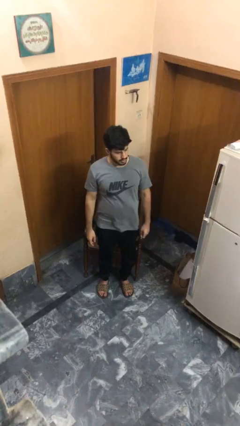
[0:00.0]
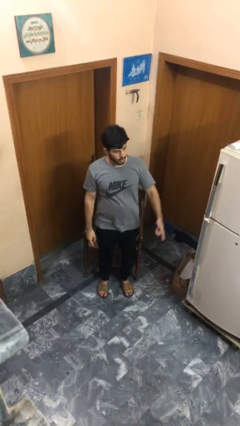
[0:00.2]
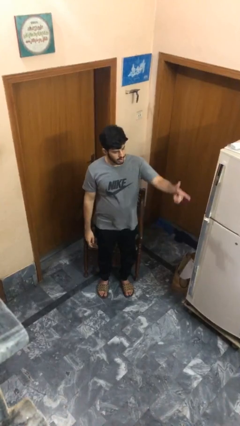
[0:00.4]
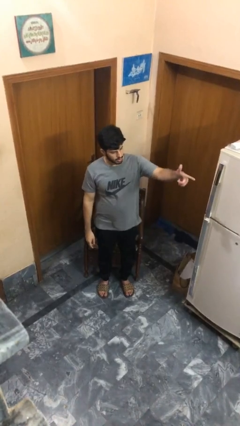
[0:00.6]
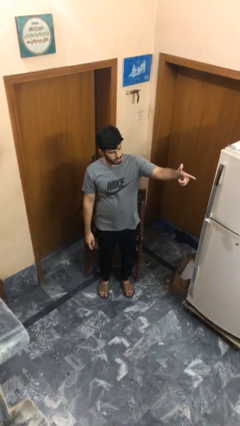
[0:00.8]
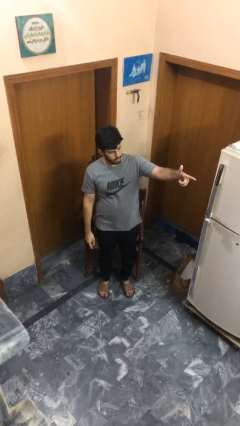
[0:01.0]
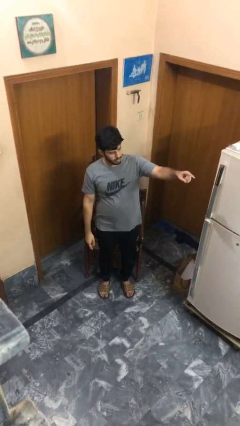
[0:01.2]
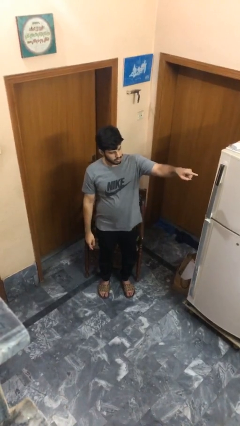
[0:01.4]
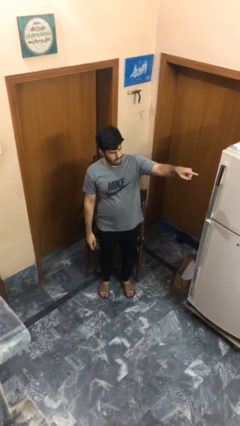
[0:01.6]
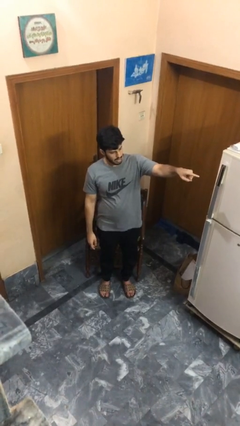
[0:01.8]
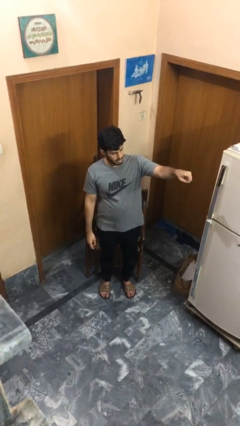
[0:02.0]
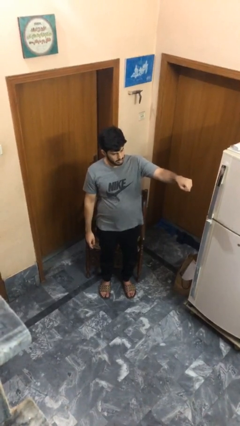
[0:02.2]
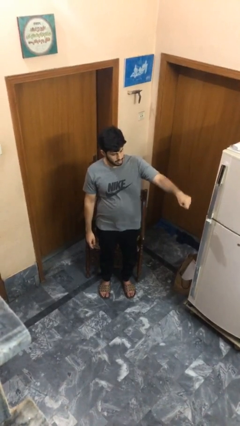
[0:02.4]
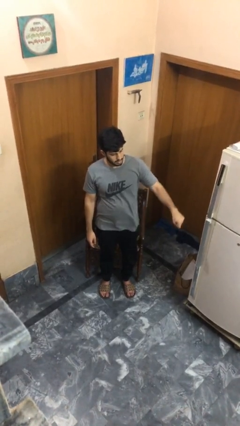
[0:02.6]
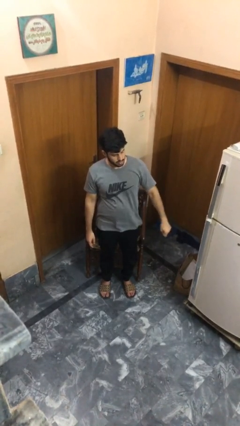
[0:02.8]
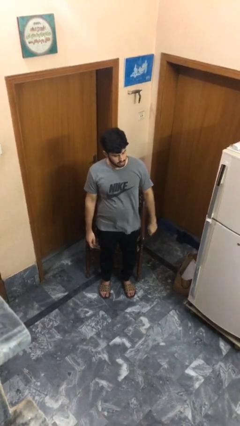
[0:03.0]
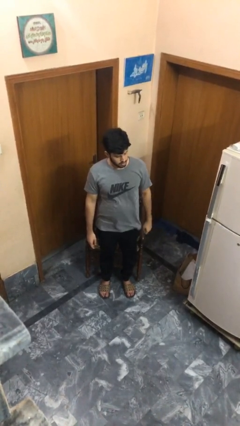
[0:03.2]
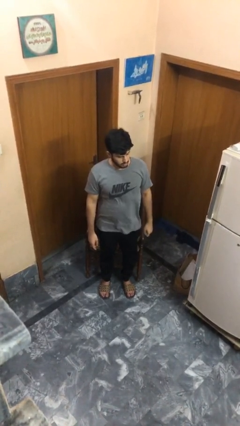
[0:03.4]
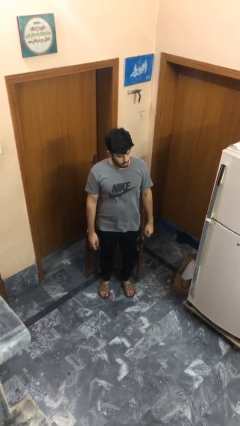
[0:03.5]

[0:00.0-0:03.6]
person points at person

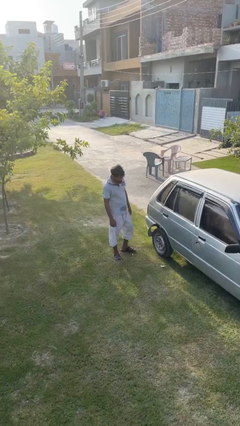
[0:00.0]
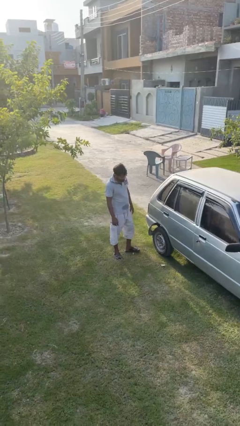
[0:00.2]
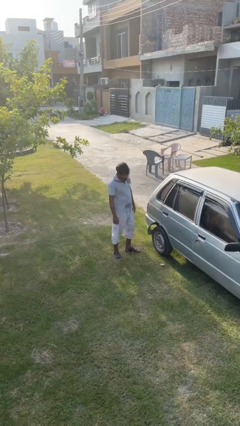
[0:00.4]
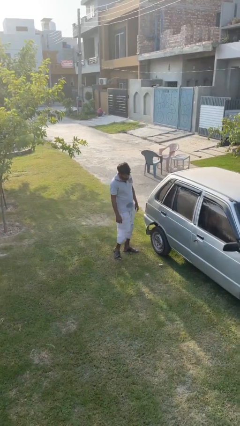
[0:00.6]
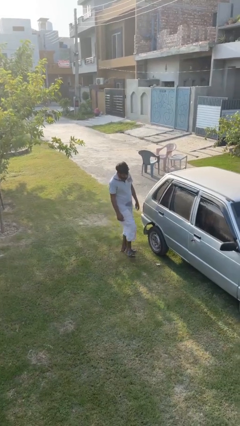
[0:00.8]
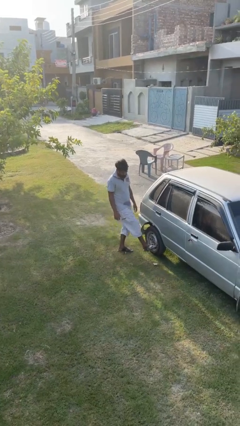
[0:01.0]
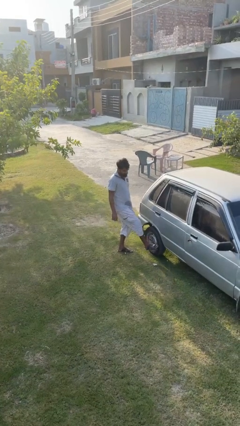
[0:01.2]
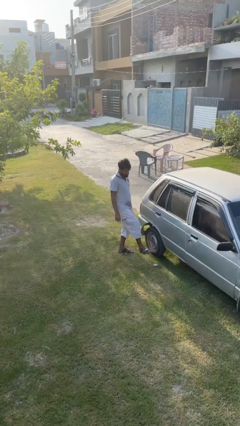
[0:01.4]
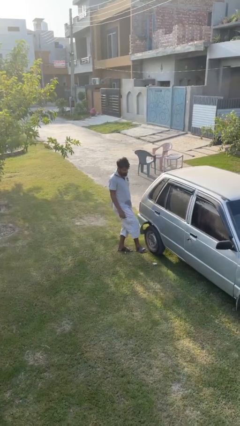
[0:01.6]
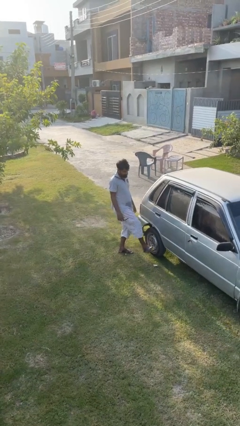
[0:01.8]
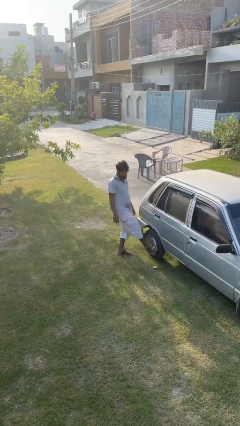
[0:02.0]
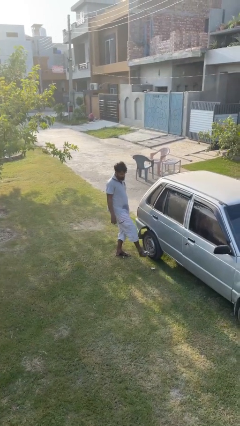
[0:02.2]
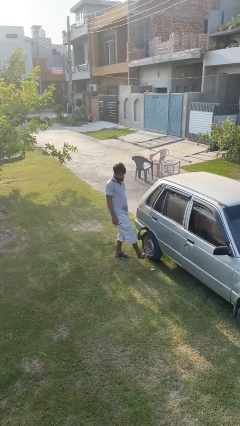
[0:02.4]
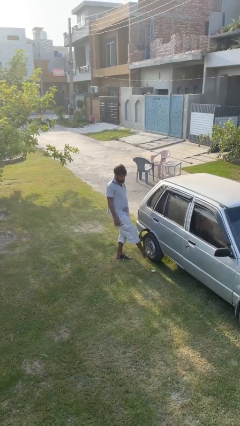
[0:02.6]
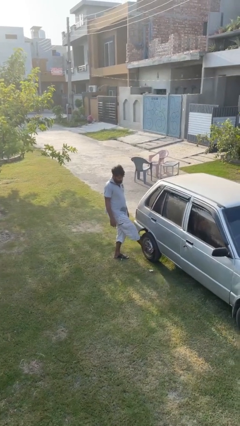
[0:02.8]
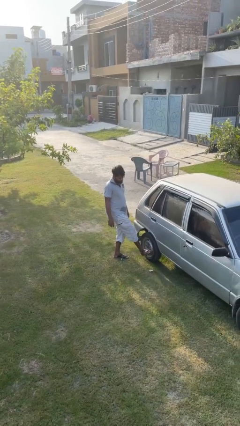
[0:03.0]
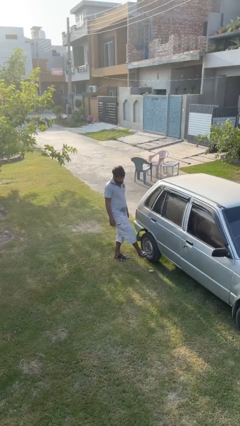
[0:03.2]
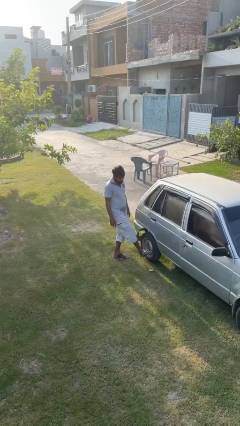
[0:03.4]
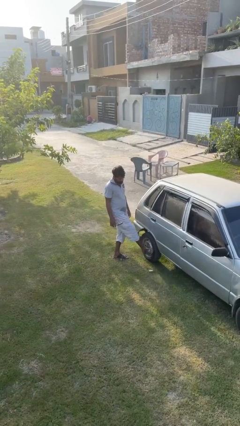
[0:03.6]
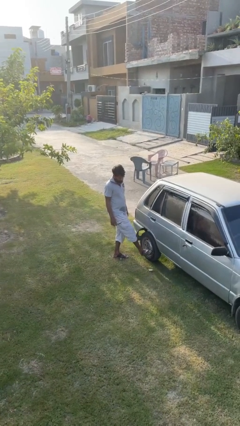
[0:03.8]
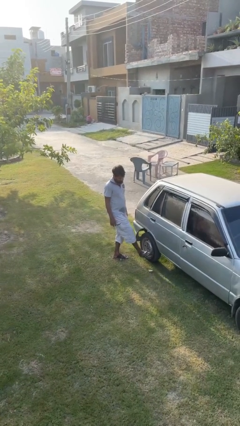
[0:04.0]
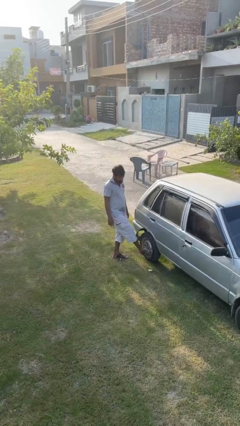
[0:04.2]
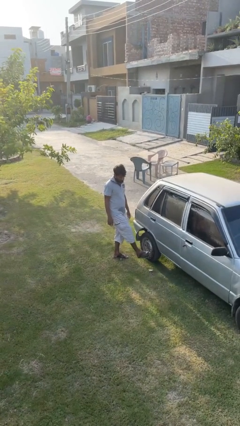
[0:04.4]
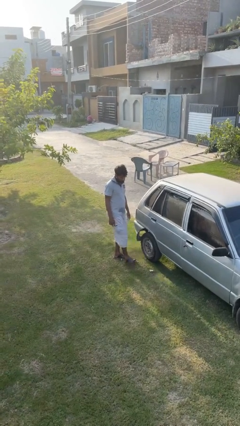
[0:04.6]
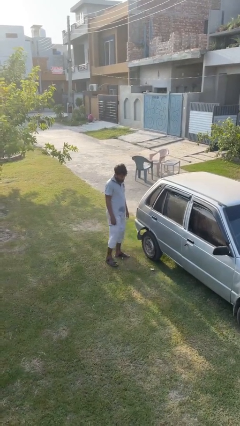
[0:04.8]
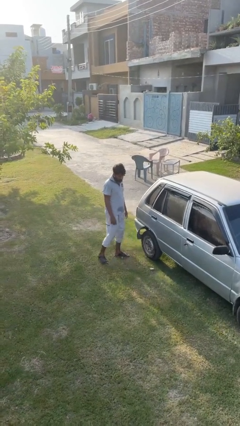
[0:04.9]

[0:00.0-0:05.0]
person kicks car tires

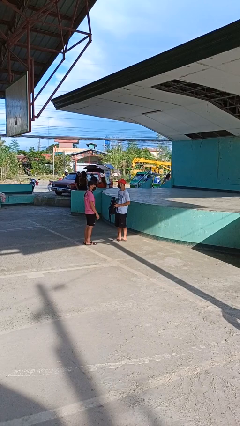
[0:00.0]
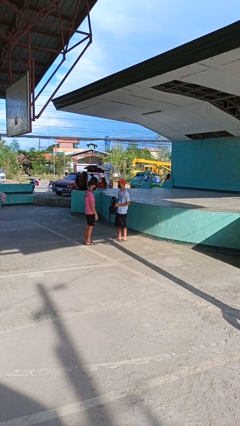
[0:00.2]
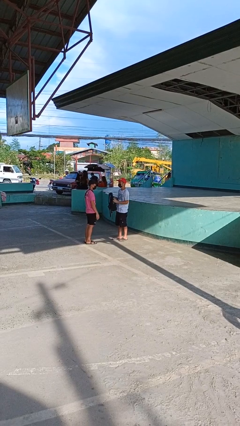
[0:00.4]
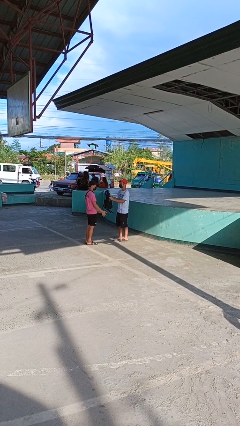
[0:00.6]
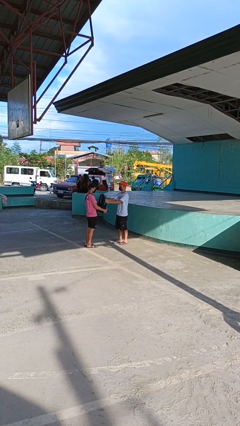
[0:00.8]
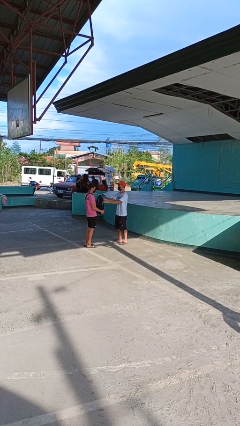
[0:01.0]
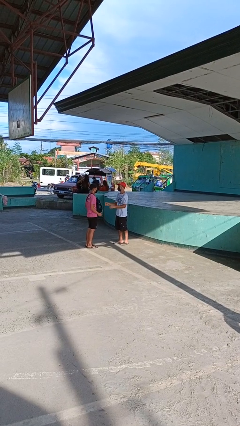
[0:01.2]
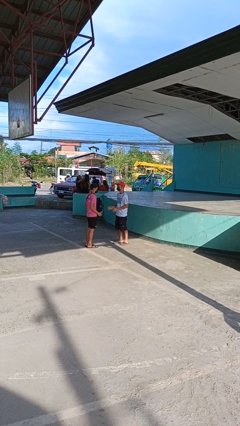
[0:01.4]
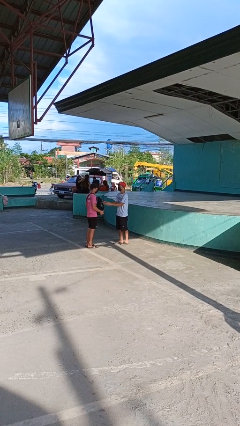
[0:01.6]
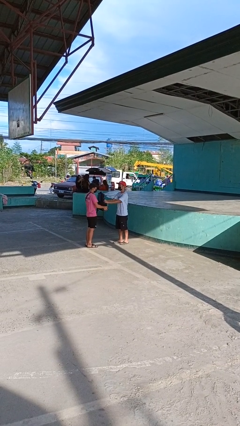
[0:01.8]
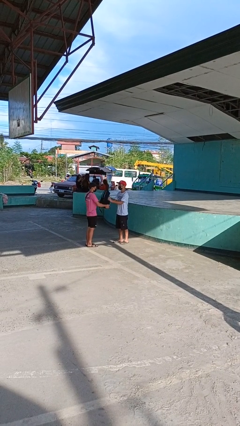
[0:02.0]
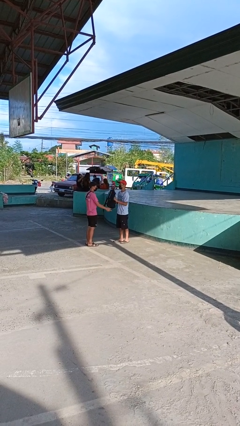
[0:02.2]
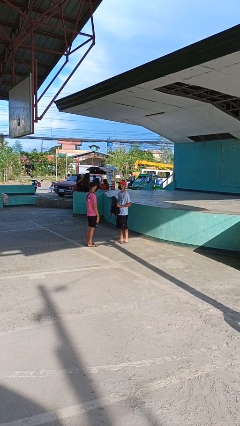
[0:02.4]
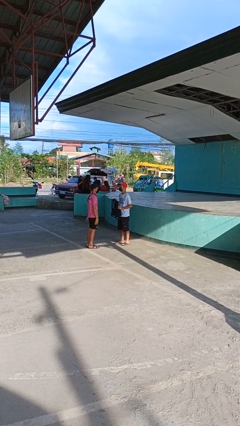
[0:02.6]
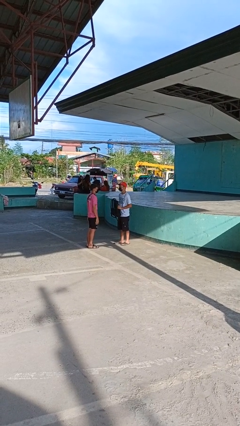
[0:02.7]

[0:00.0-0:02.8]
person transfers object to person

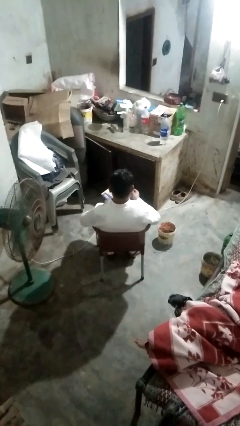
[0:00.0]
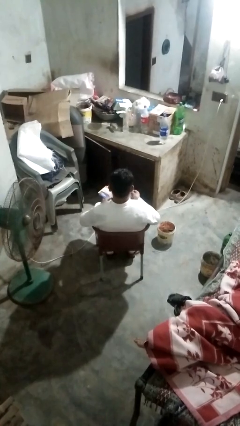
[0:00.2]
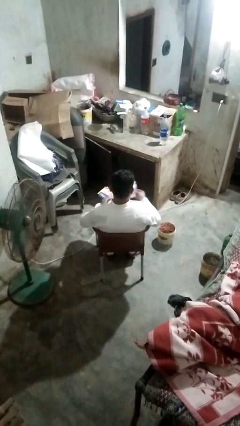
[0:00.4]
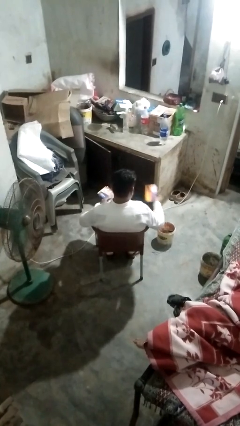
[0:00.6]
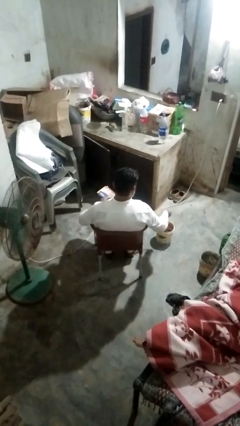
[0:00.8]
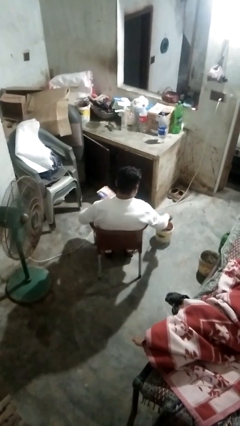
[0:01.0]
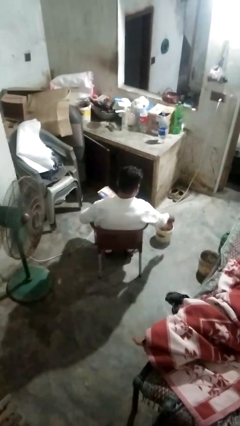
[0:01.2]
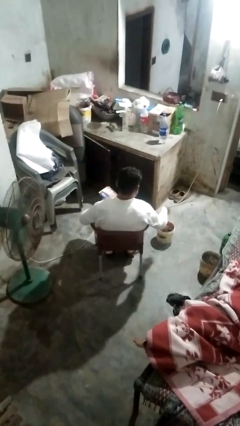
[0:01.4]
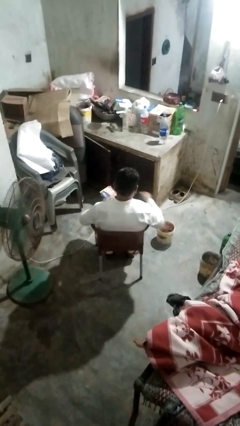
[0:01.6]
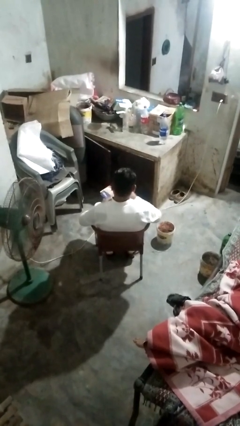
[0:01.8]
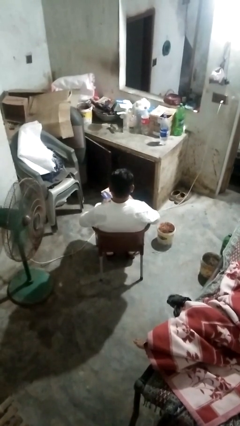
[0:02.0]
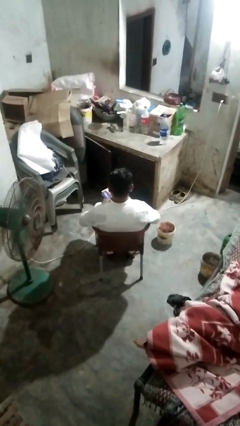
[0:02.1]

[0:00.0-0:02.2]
person discards trash

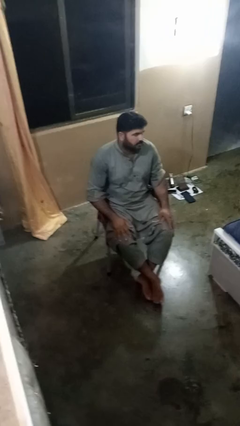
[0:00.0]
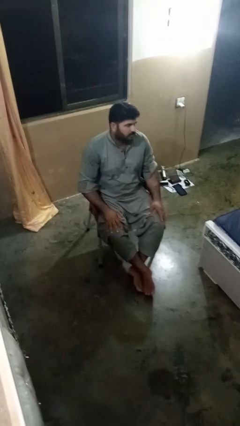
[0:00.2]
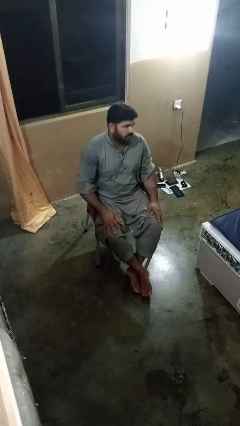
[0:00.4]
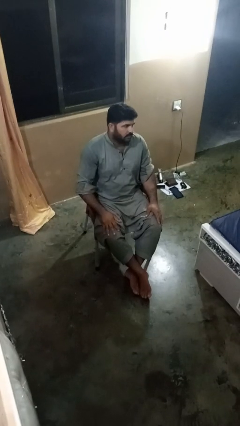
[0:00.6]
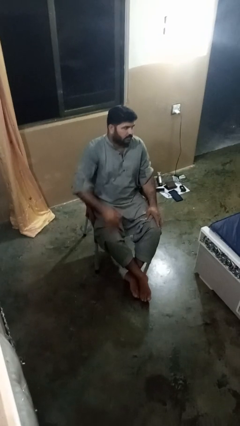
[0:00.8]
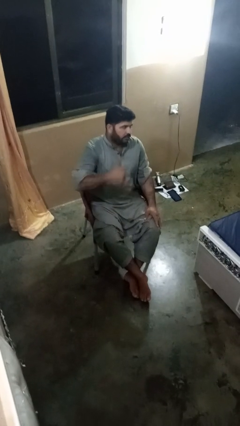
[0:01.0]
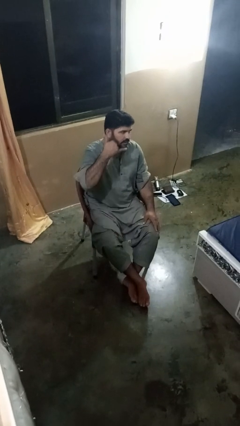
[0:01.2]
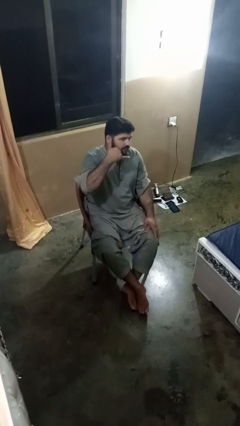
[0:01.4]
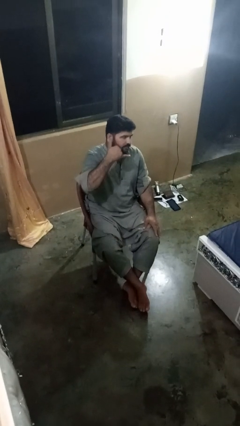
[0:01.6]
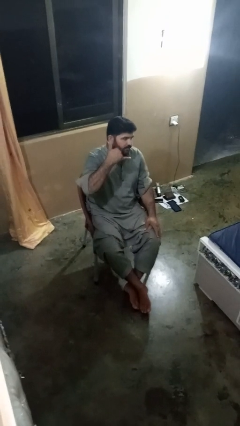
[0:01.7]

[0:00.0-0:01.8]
person gestures call me

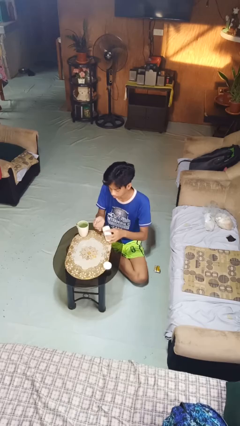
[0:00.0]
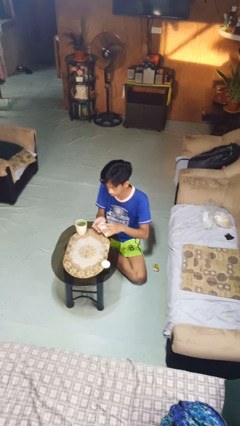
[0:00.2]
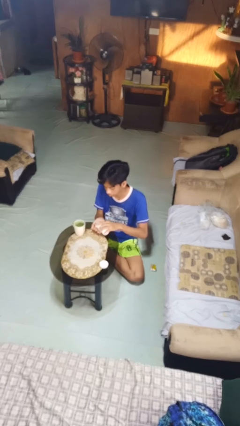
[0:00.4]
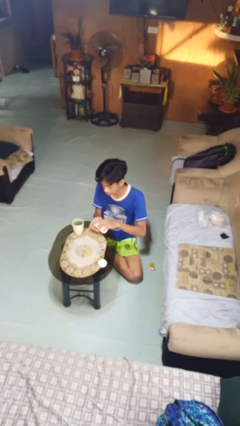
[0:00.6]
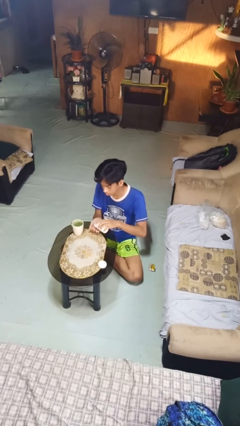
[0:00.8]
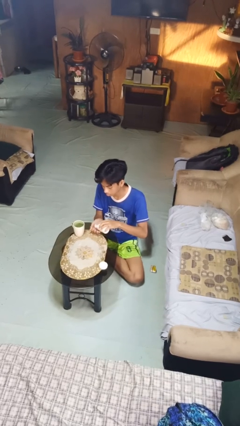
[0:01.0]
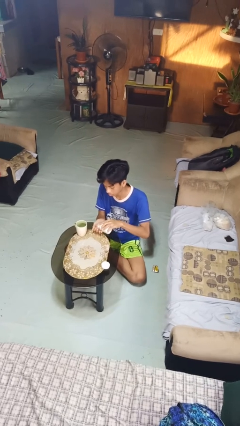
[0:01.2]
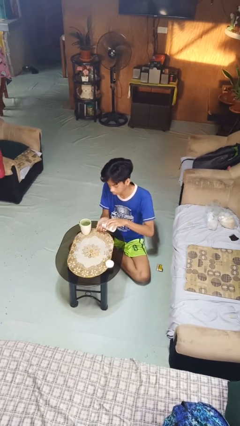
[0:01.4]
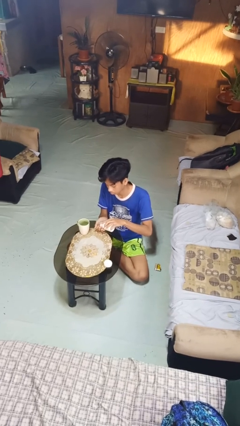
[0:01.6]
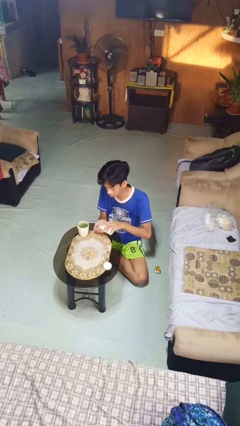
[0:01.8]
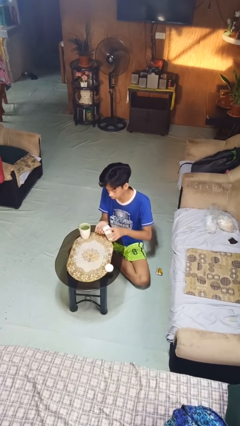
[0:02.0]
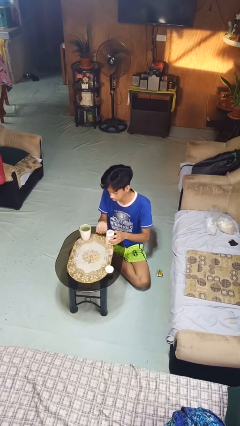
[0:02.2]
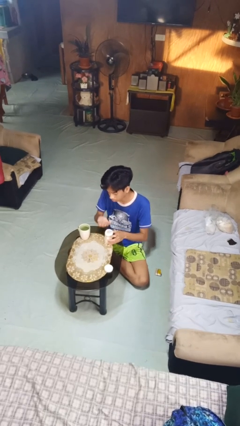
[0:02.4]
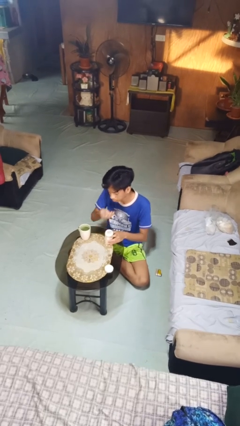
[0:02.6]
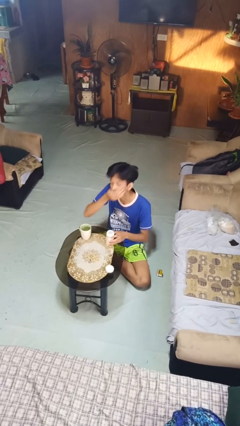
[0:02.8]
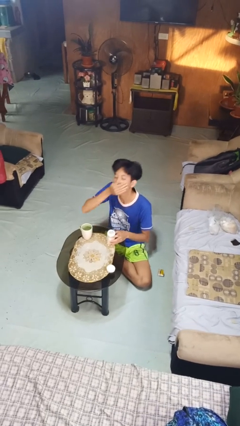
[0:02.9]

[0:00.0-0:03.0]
person takes medicine pills
